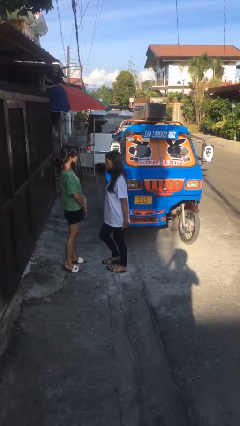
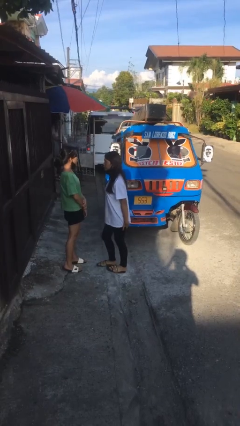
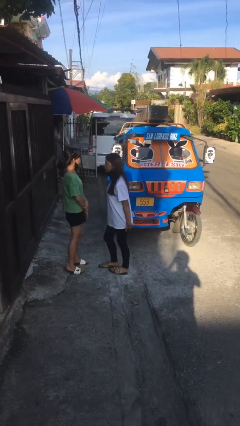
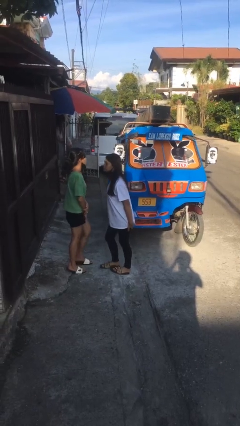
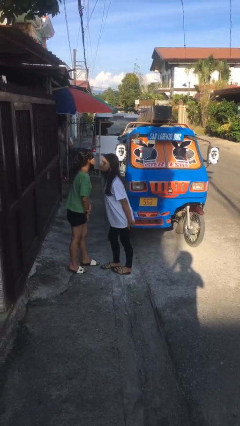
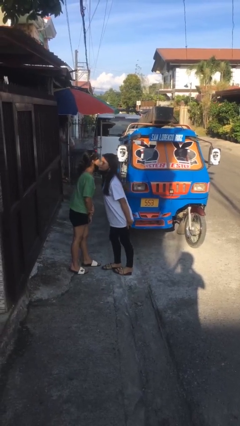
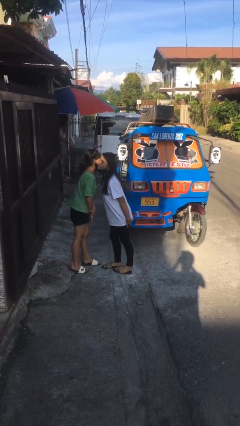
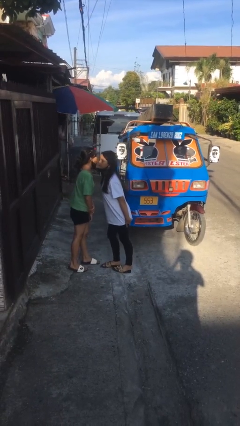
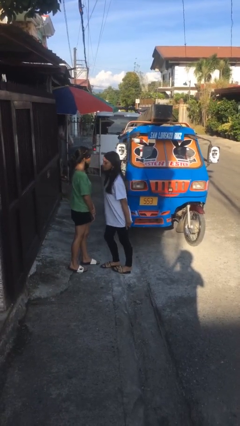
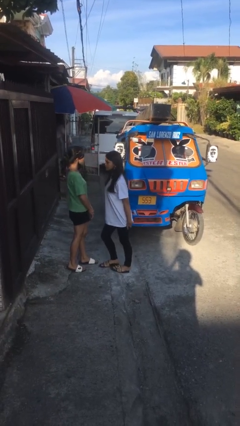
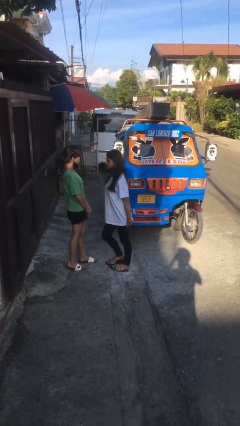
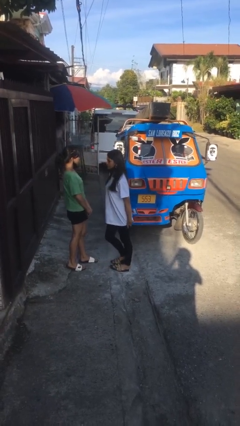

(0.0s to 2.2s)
person kisses cheek of person

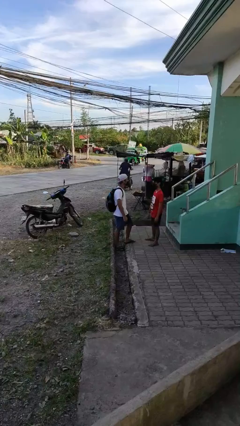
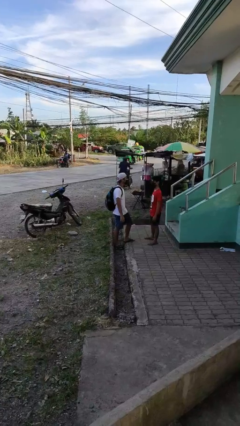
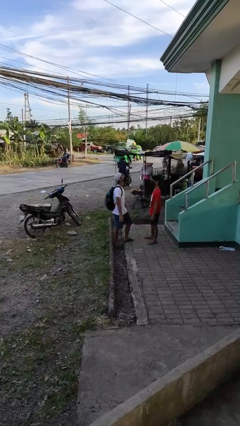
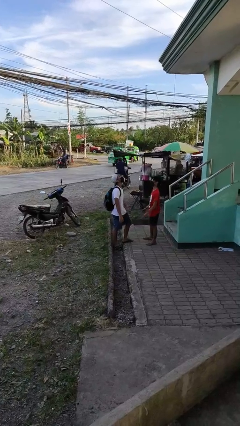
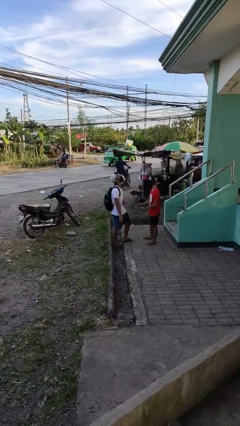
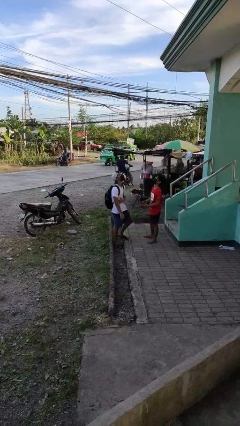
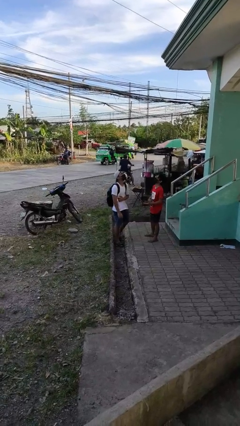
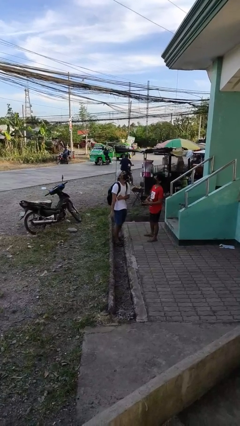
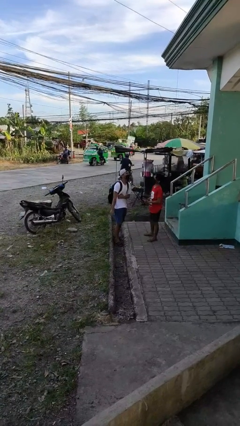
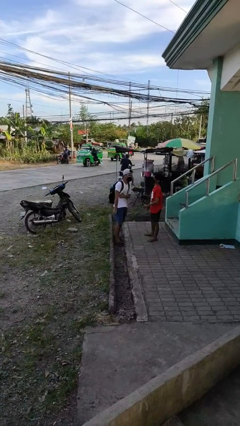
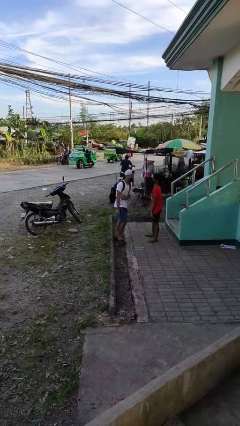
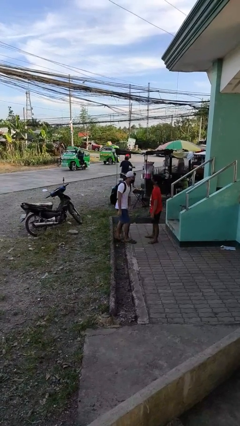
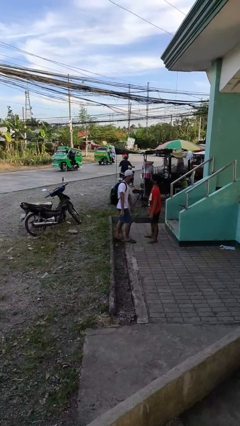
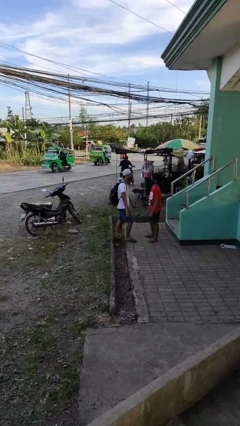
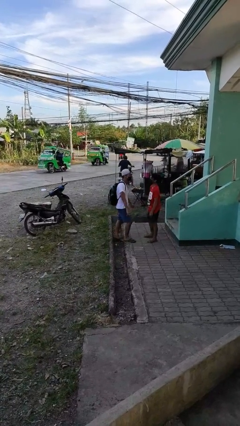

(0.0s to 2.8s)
person laughs with person

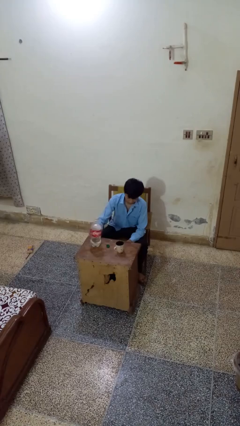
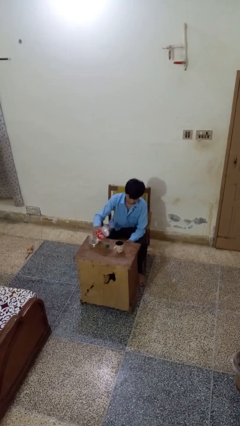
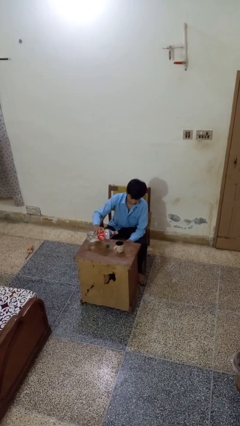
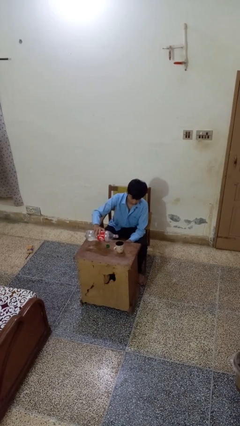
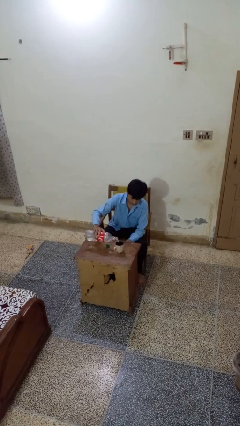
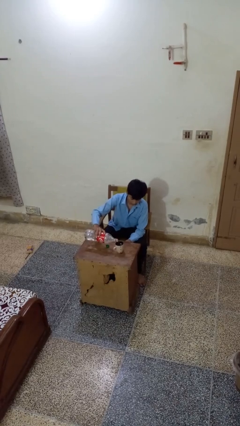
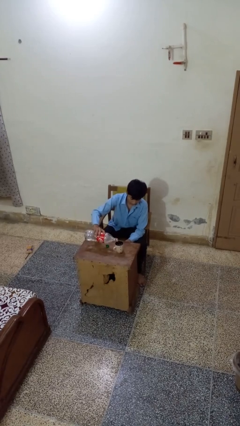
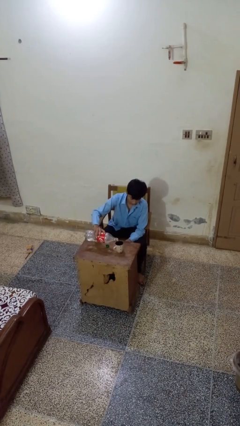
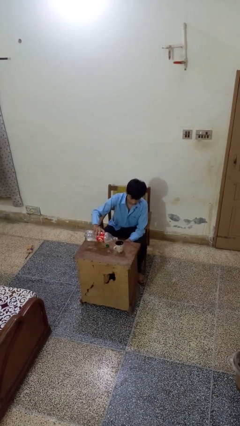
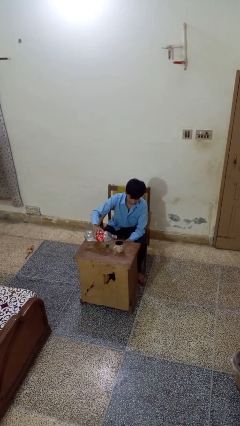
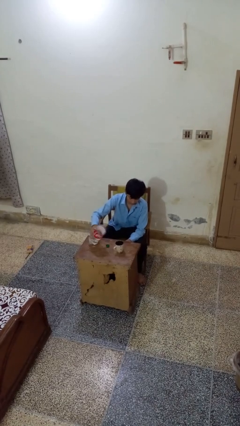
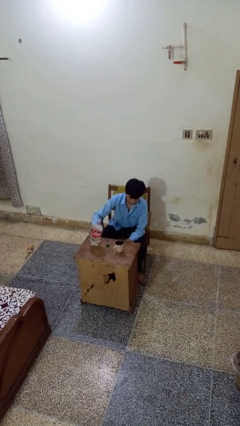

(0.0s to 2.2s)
person pours liquid into cup

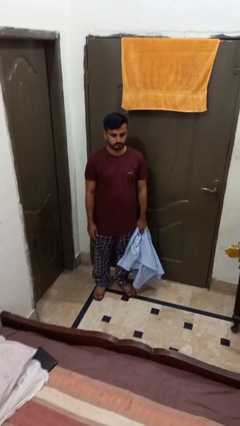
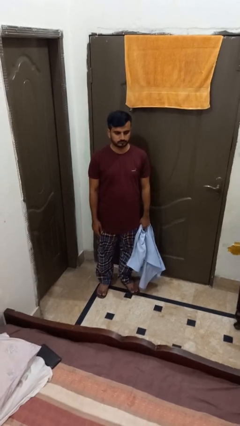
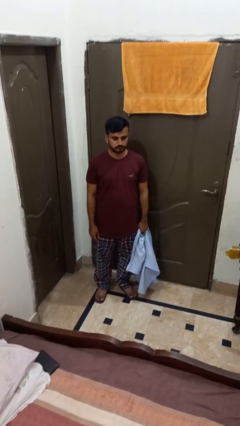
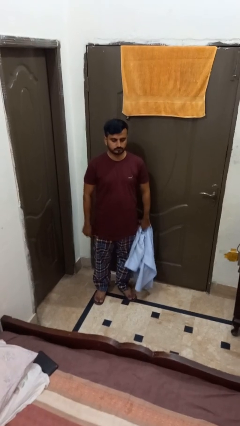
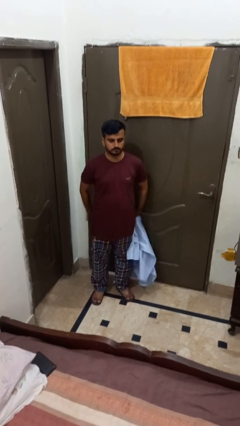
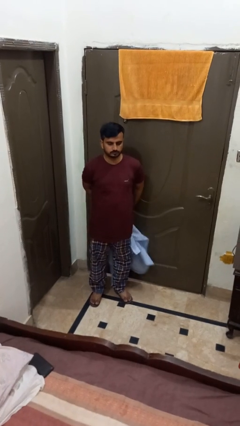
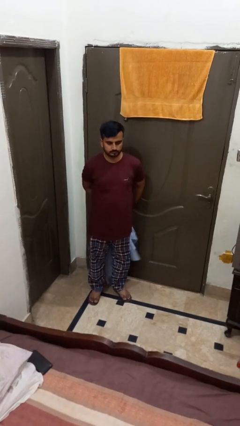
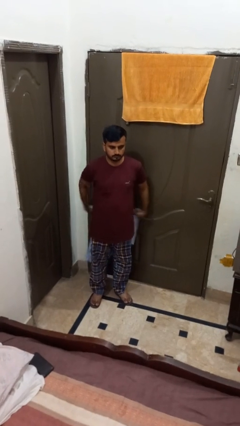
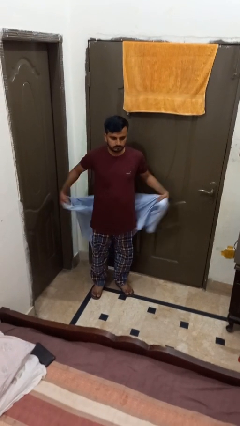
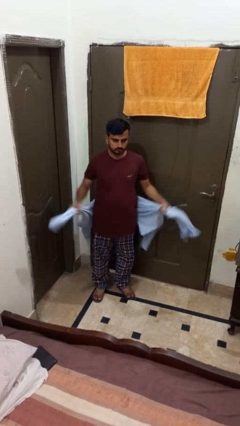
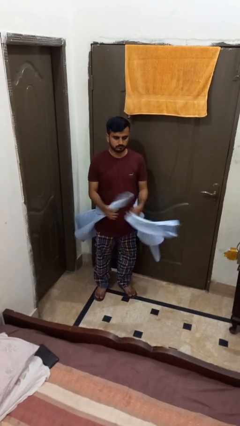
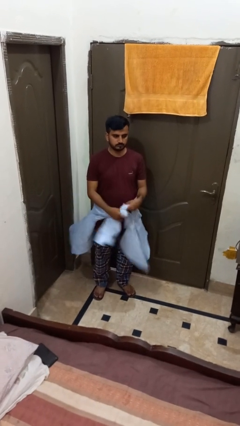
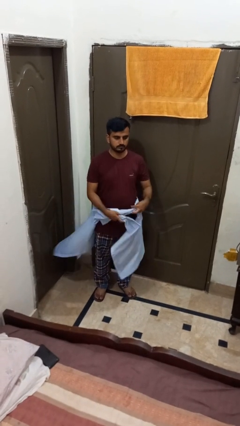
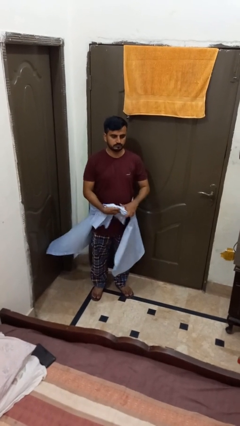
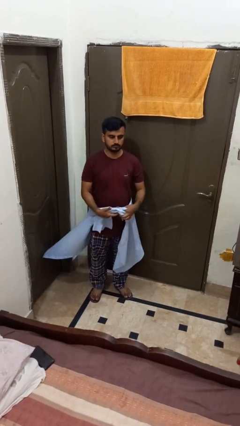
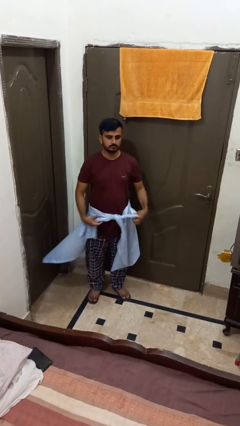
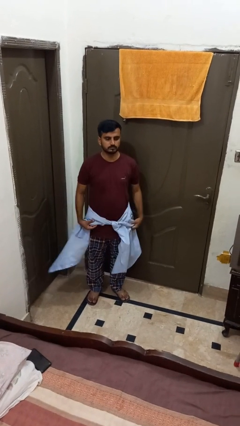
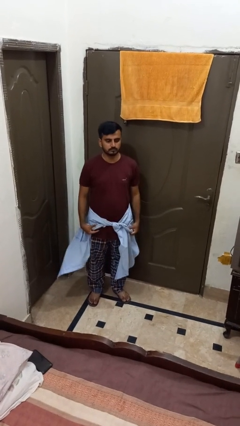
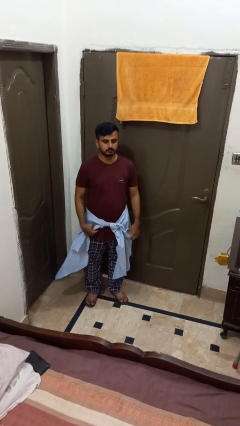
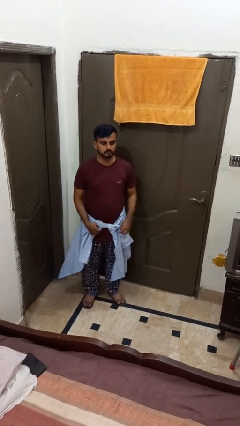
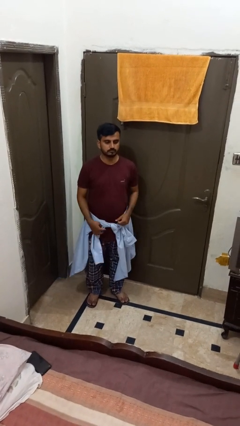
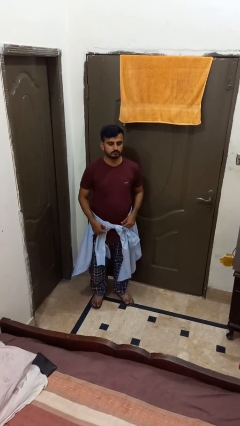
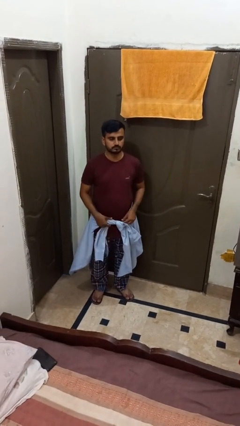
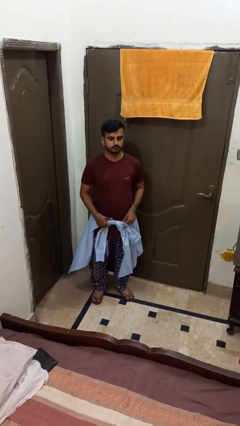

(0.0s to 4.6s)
person ties jacket around waist

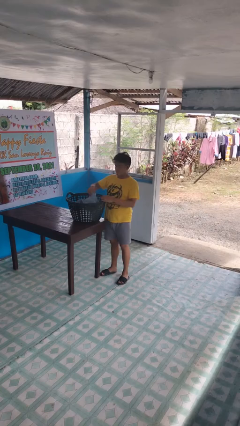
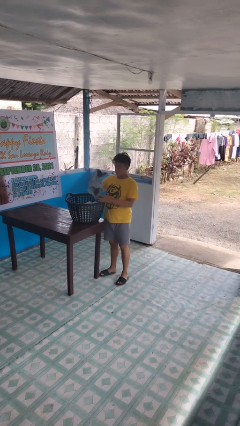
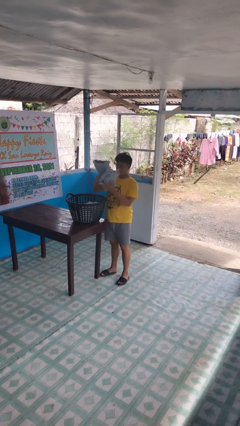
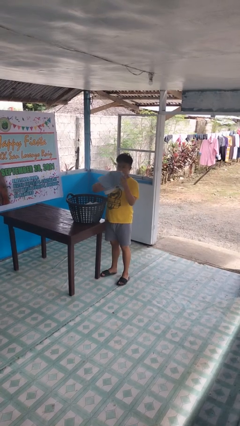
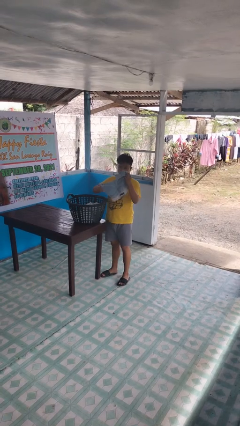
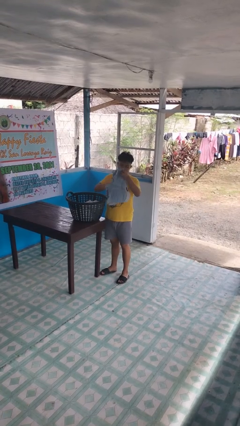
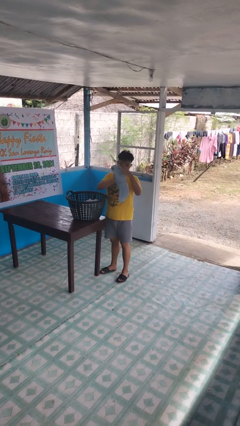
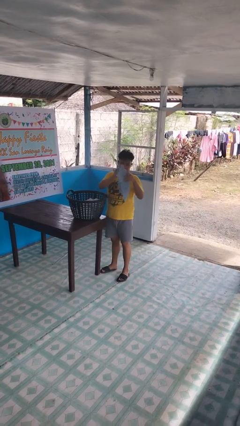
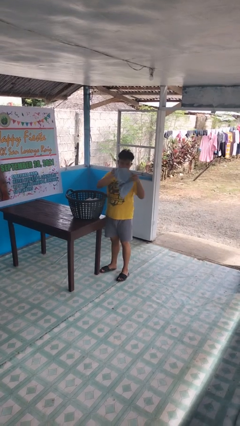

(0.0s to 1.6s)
person takes object from basket

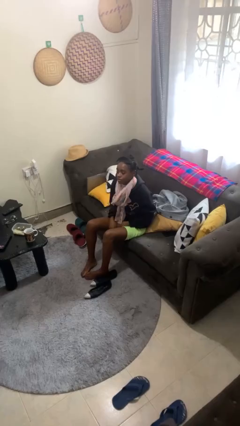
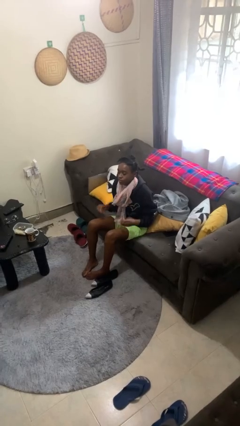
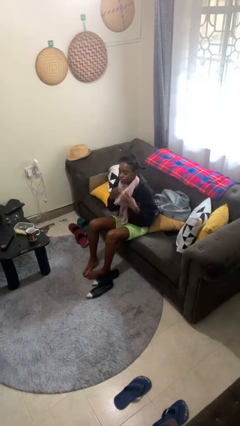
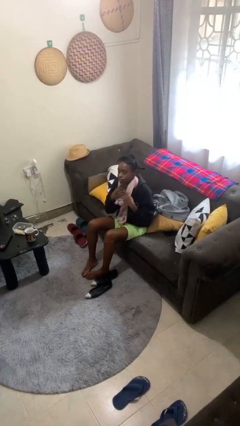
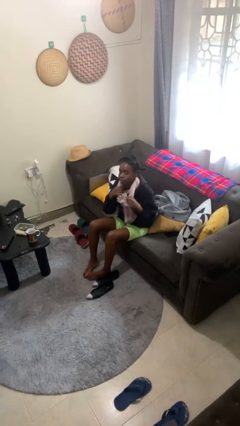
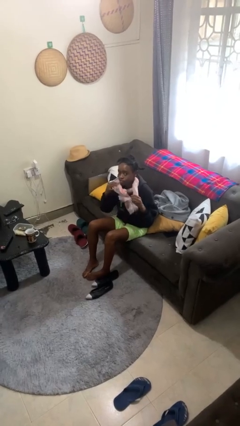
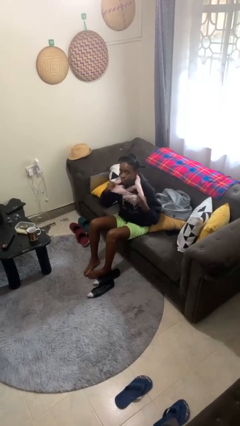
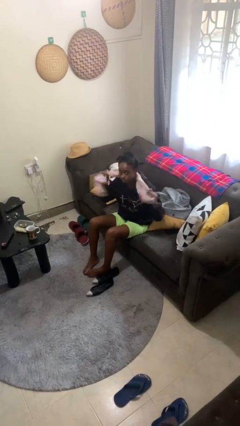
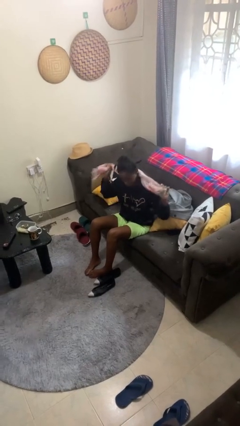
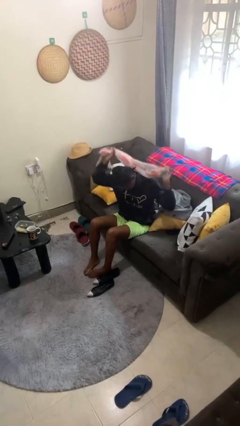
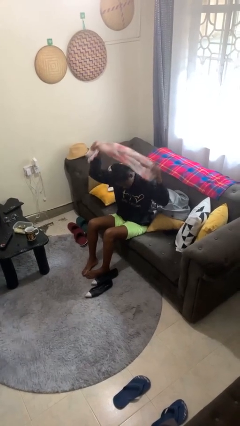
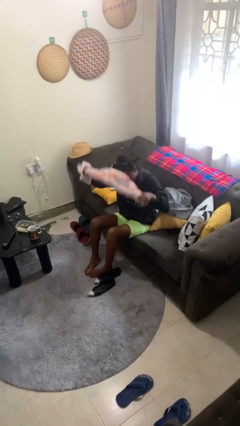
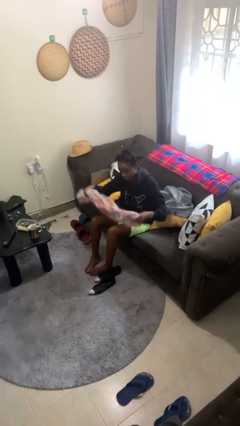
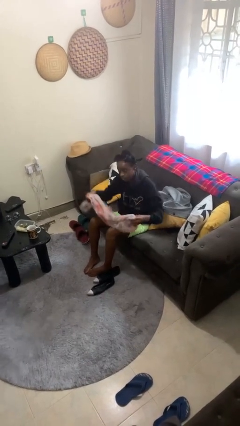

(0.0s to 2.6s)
person takes off scarf

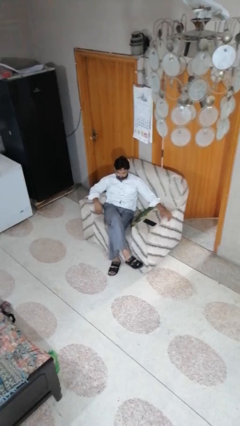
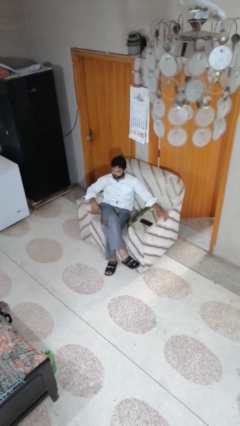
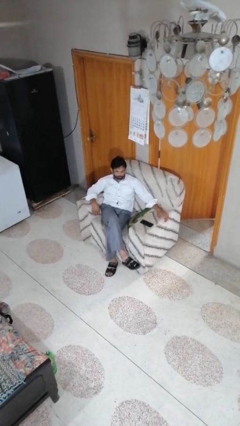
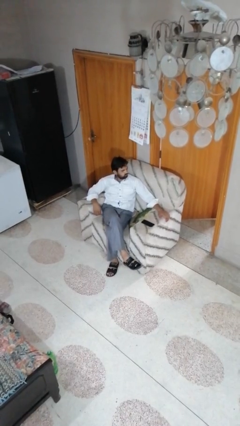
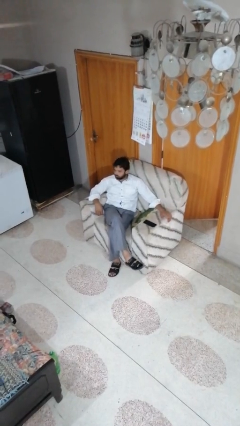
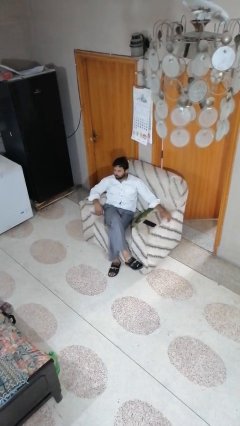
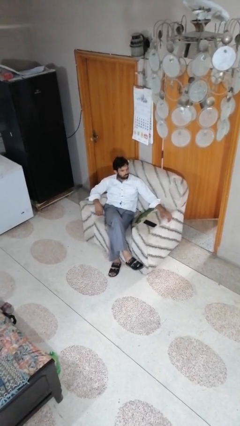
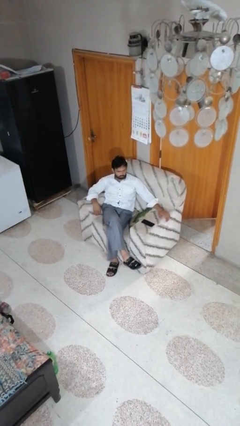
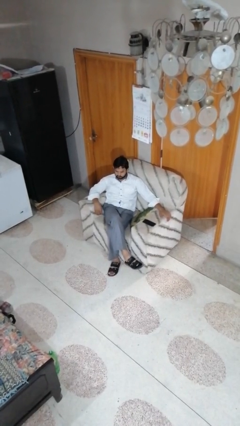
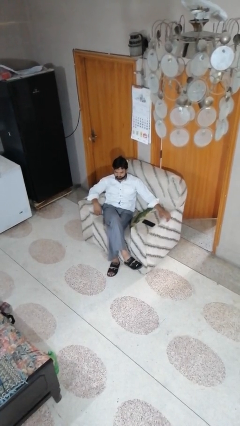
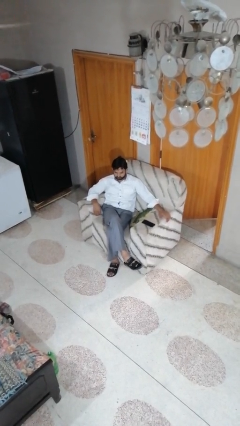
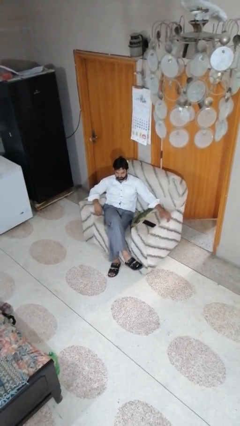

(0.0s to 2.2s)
person shakes head
